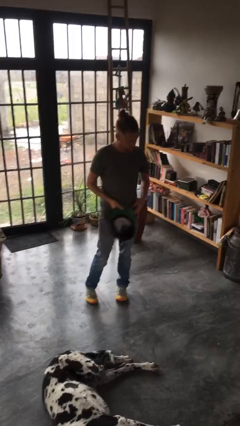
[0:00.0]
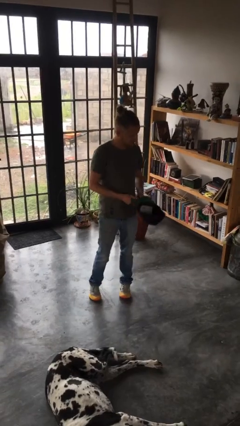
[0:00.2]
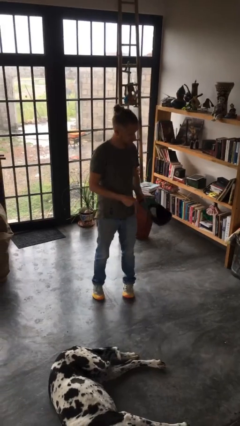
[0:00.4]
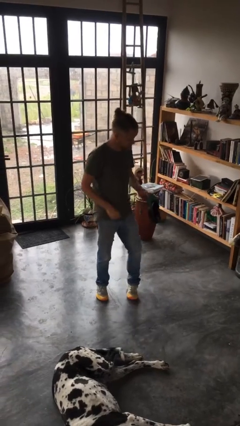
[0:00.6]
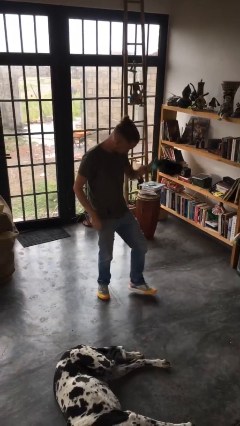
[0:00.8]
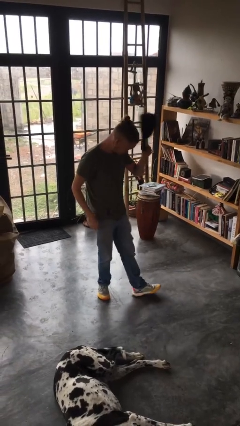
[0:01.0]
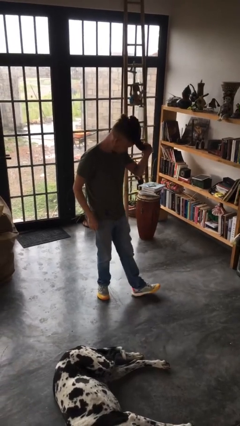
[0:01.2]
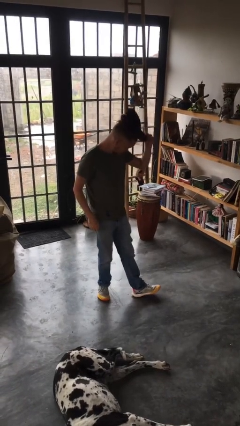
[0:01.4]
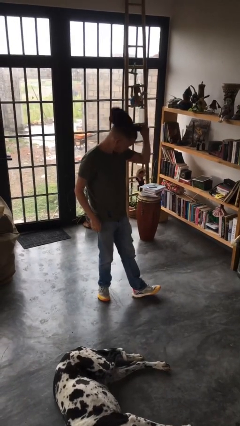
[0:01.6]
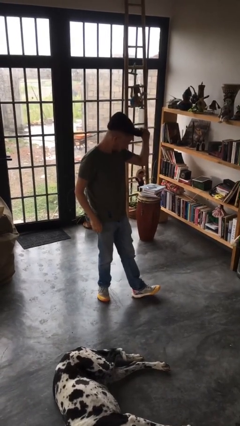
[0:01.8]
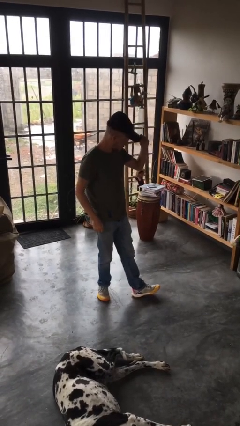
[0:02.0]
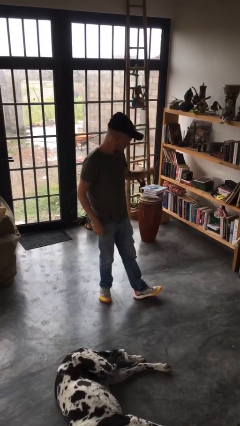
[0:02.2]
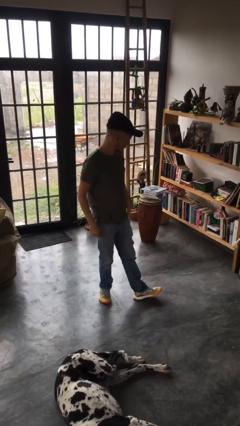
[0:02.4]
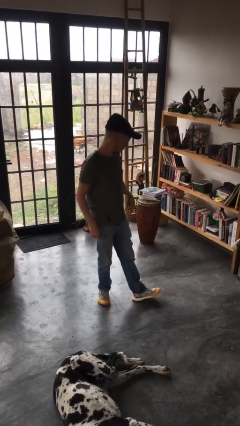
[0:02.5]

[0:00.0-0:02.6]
person puts on hat

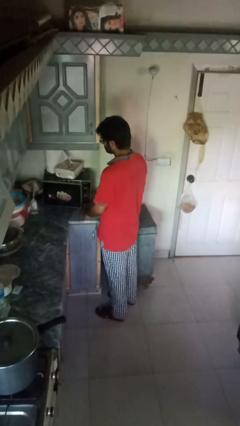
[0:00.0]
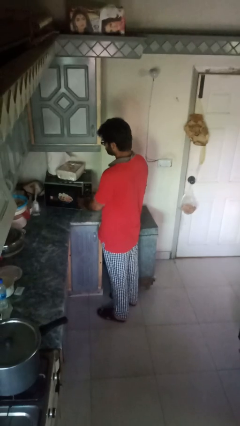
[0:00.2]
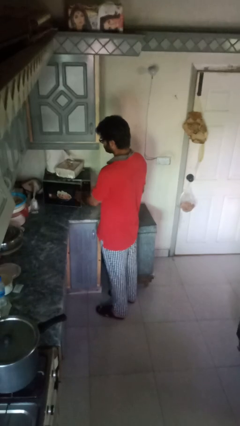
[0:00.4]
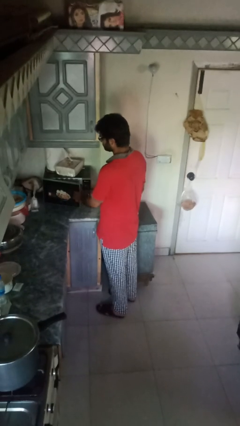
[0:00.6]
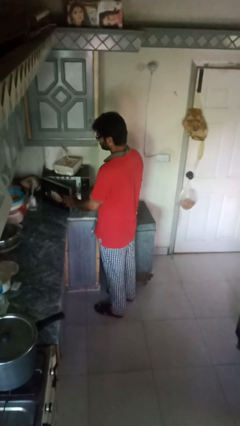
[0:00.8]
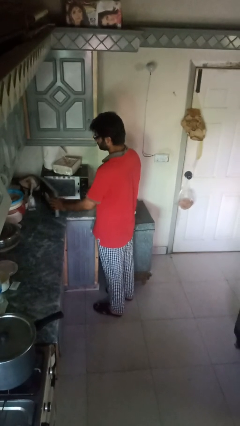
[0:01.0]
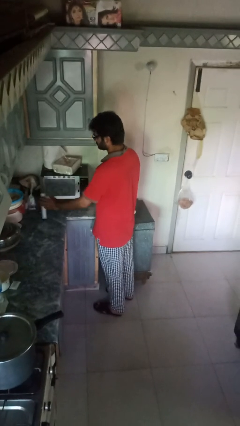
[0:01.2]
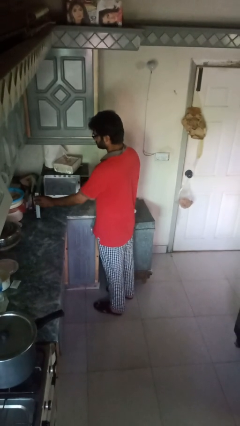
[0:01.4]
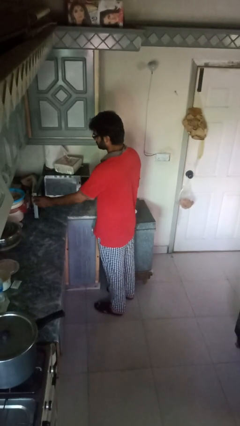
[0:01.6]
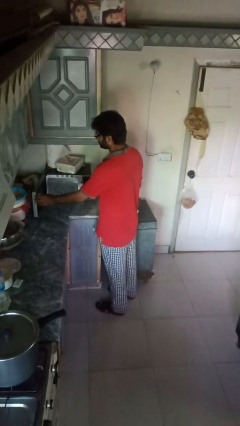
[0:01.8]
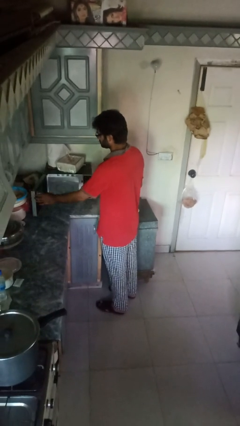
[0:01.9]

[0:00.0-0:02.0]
person opens oven door

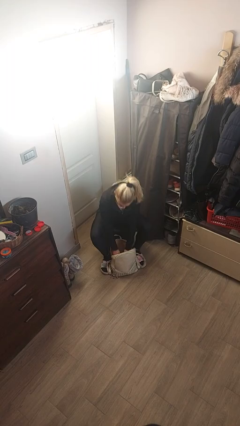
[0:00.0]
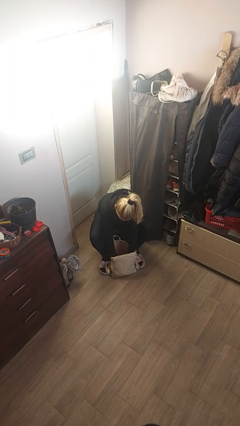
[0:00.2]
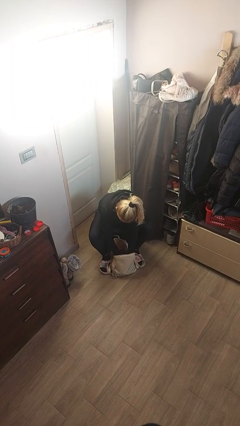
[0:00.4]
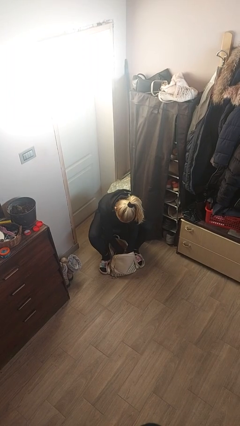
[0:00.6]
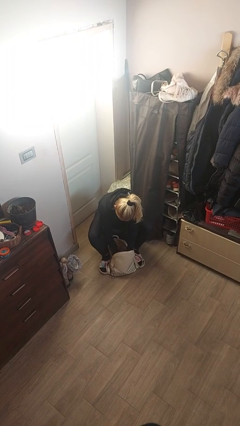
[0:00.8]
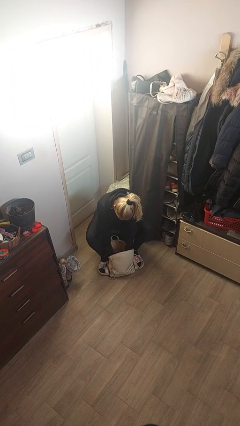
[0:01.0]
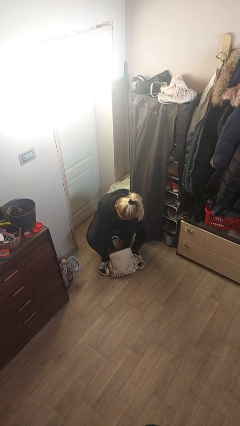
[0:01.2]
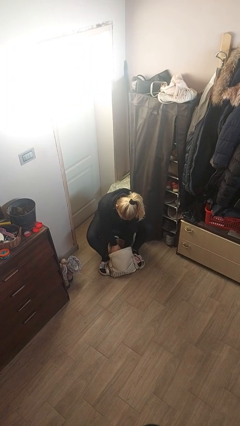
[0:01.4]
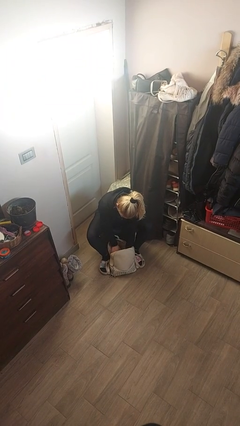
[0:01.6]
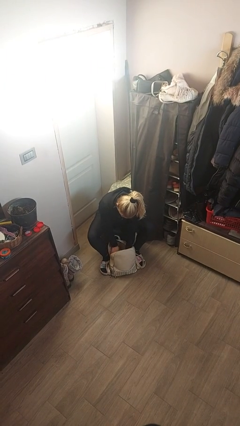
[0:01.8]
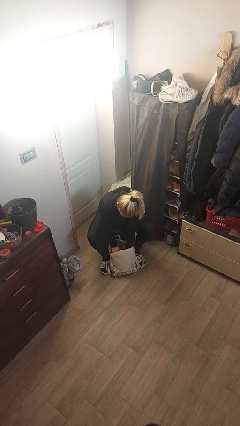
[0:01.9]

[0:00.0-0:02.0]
person searches in backpack

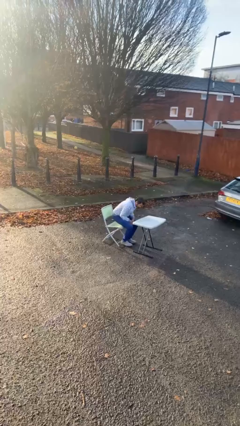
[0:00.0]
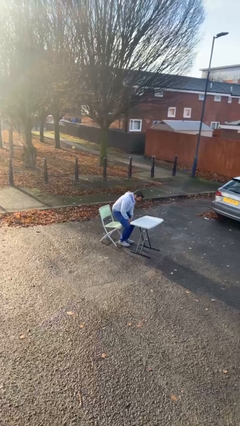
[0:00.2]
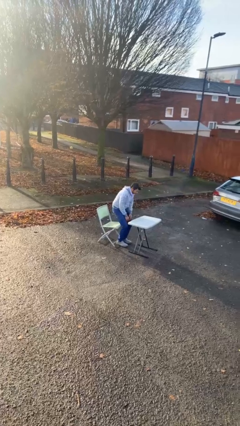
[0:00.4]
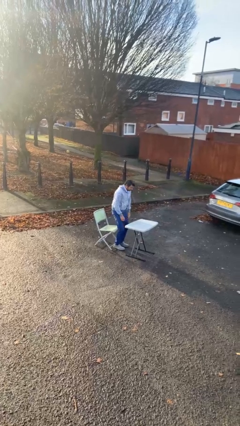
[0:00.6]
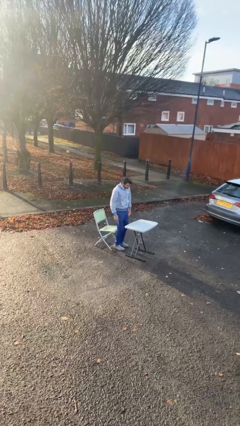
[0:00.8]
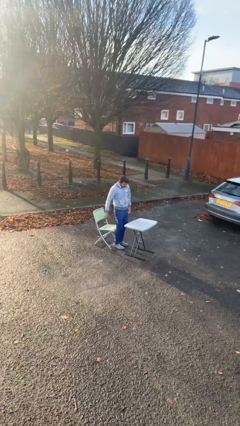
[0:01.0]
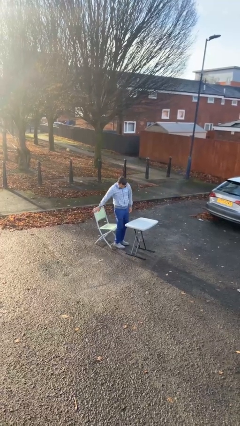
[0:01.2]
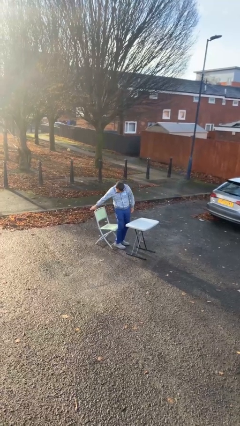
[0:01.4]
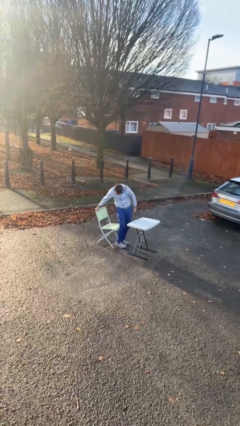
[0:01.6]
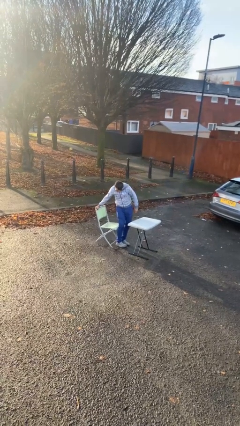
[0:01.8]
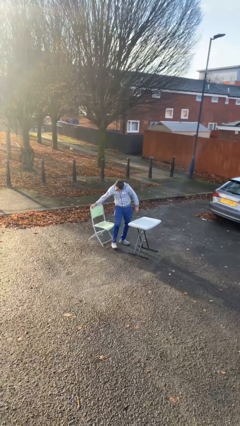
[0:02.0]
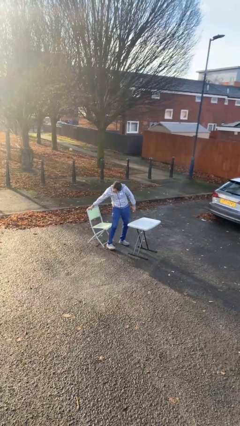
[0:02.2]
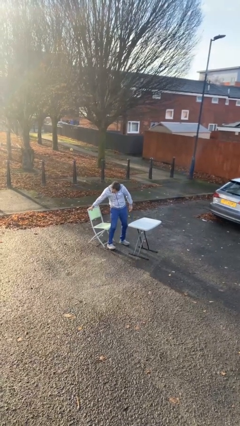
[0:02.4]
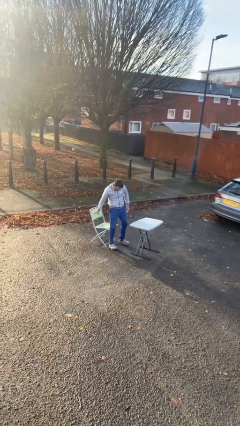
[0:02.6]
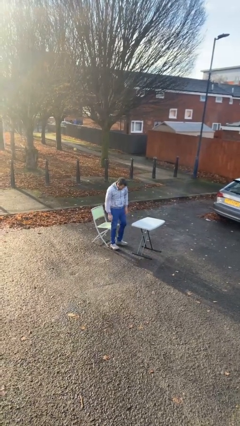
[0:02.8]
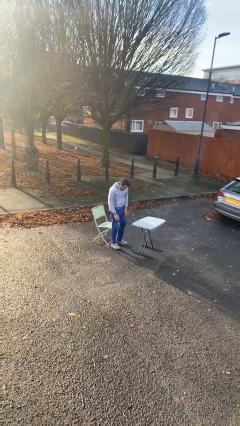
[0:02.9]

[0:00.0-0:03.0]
person stands up

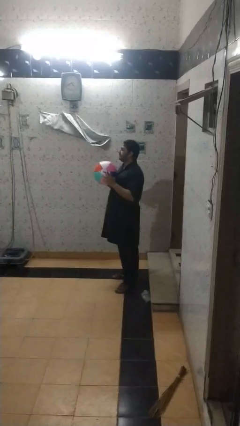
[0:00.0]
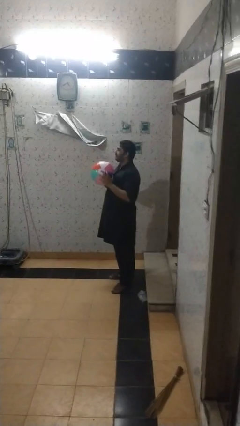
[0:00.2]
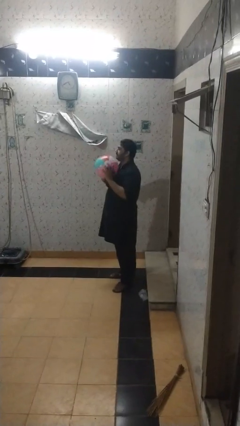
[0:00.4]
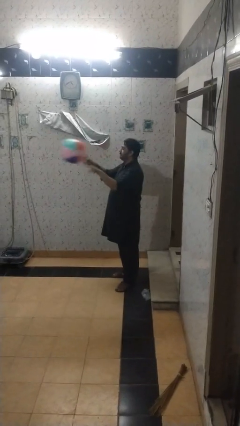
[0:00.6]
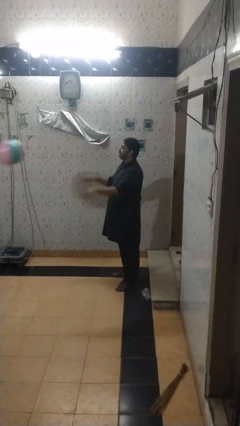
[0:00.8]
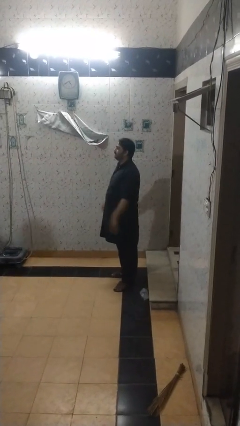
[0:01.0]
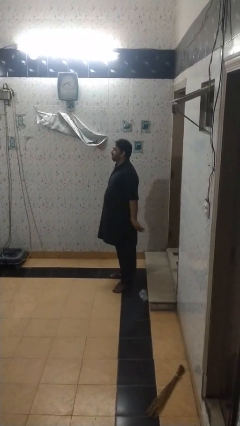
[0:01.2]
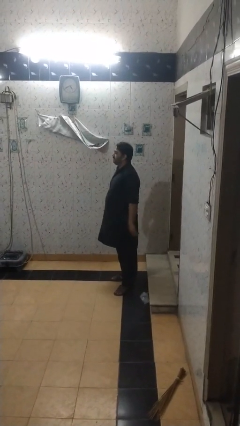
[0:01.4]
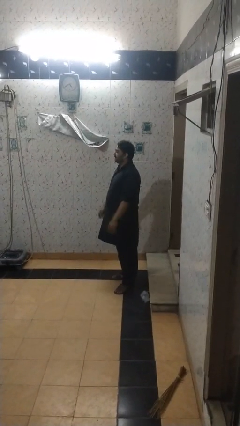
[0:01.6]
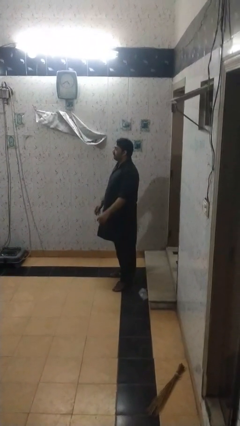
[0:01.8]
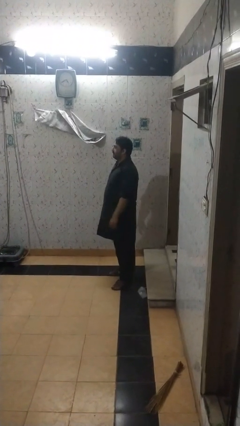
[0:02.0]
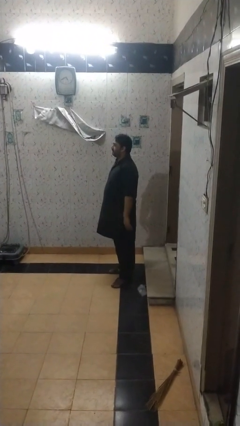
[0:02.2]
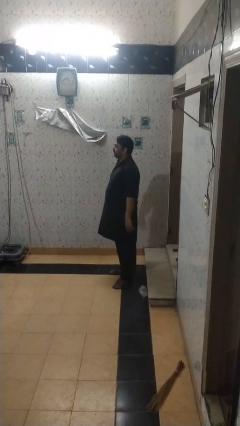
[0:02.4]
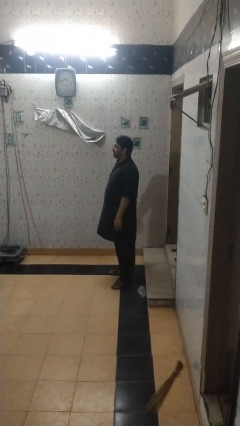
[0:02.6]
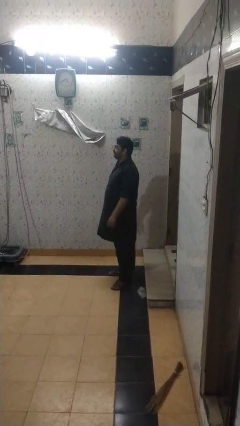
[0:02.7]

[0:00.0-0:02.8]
person throws object to person

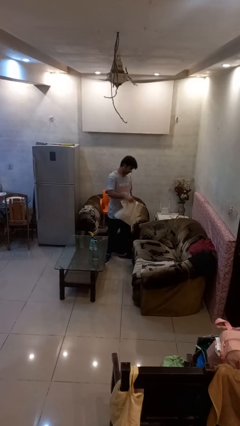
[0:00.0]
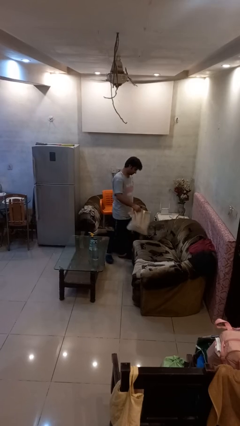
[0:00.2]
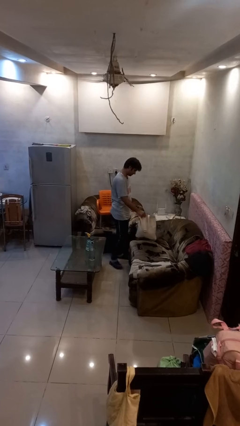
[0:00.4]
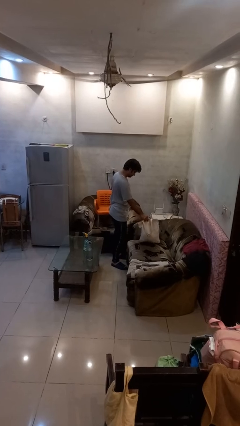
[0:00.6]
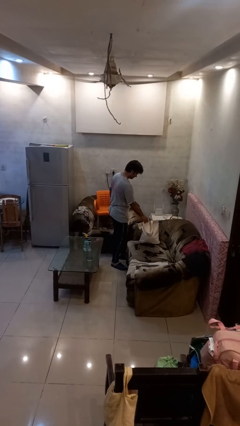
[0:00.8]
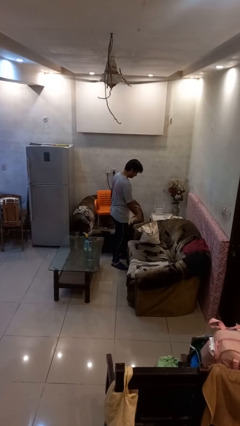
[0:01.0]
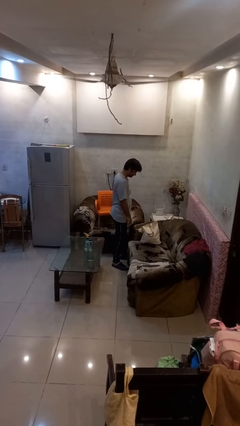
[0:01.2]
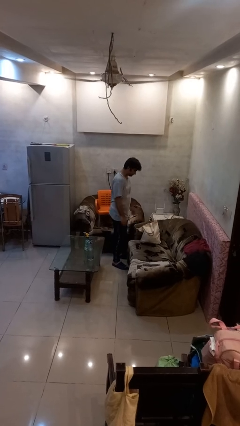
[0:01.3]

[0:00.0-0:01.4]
person puts down object on couch

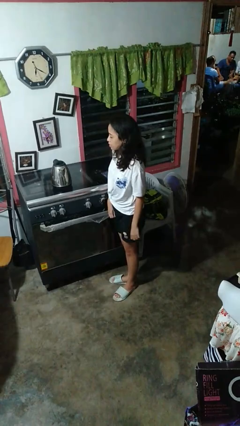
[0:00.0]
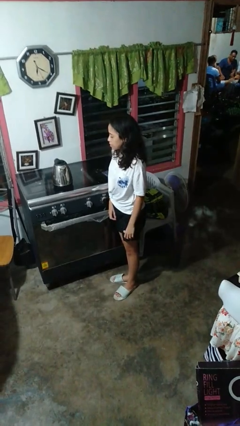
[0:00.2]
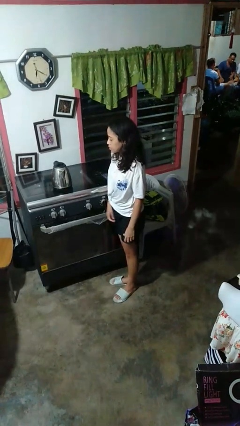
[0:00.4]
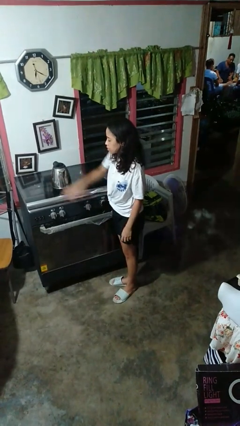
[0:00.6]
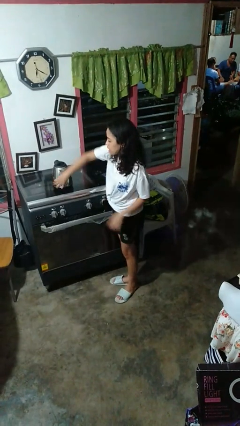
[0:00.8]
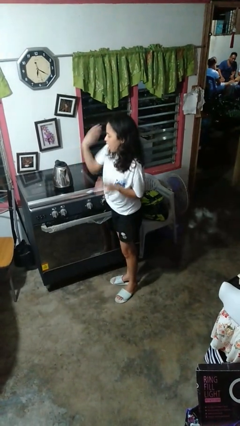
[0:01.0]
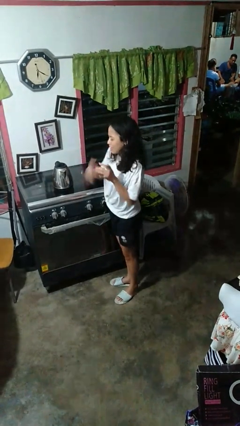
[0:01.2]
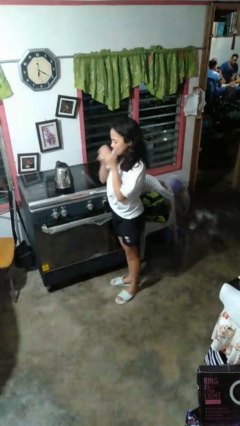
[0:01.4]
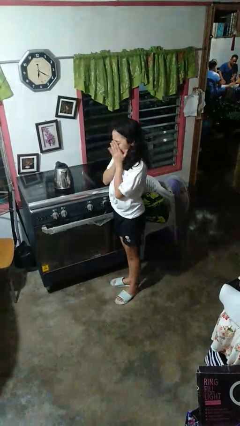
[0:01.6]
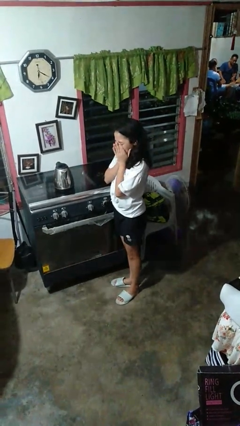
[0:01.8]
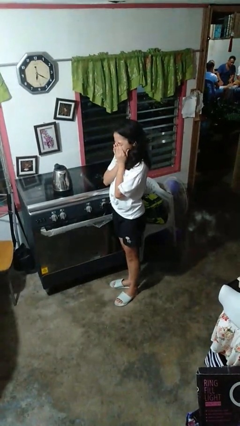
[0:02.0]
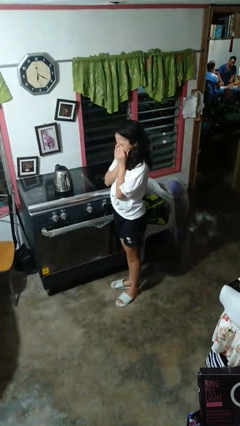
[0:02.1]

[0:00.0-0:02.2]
person burns hand

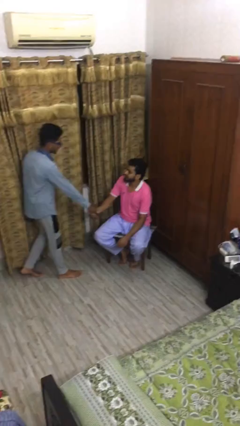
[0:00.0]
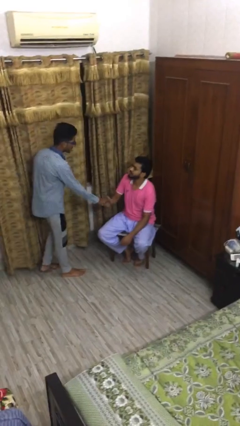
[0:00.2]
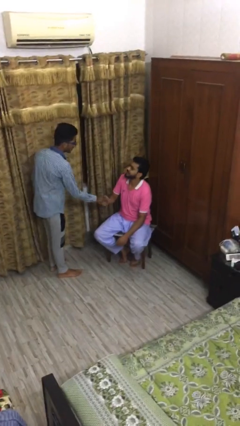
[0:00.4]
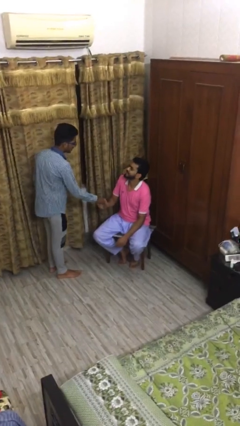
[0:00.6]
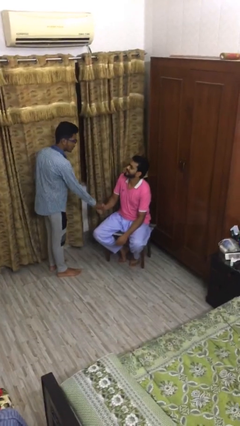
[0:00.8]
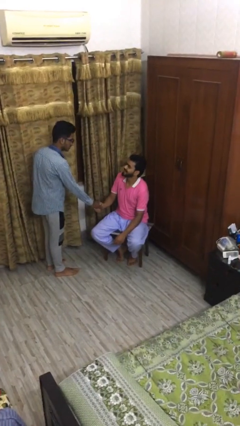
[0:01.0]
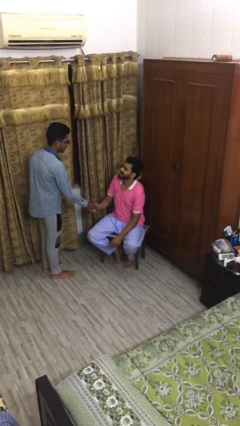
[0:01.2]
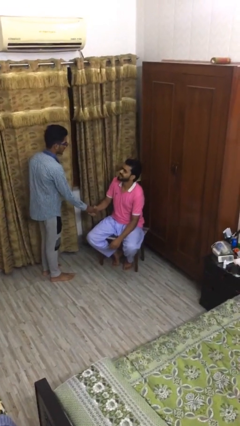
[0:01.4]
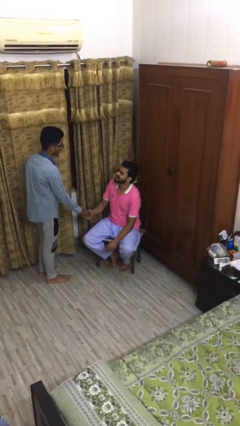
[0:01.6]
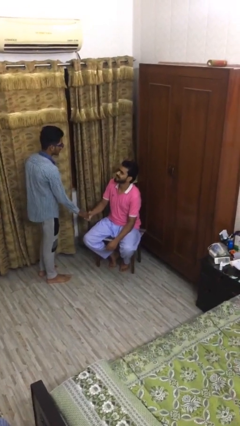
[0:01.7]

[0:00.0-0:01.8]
person shakes hand
